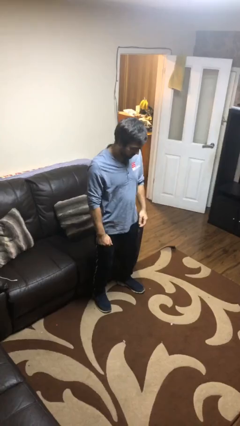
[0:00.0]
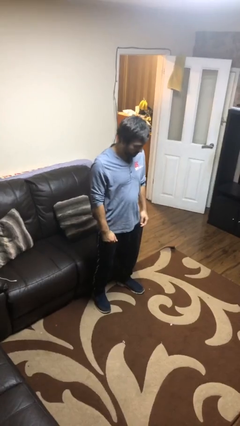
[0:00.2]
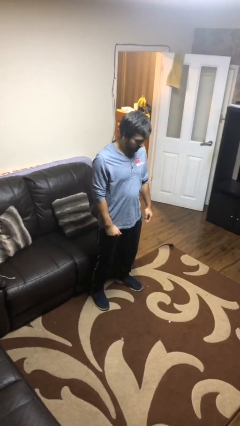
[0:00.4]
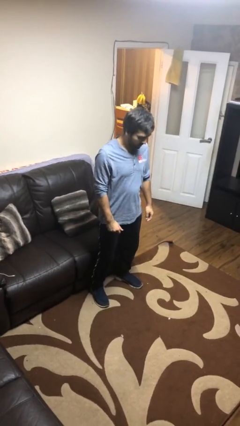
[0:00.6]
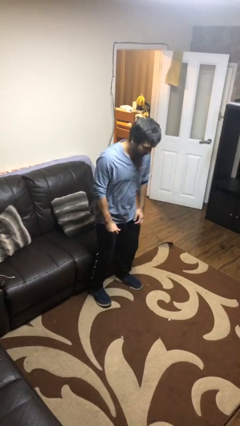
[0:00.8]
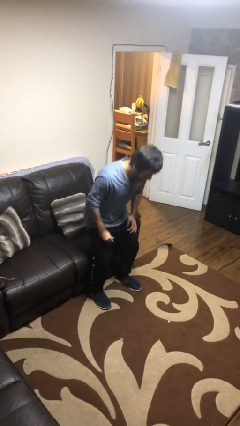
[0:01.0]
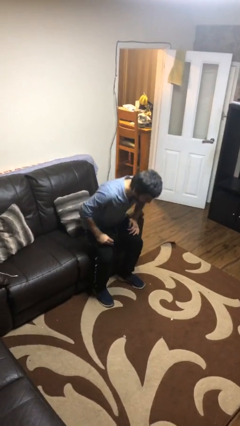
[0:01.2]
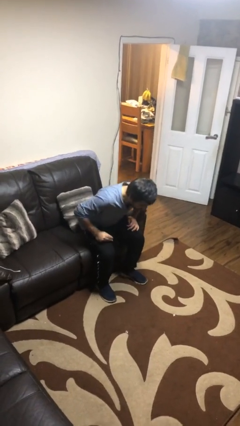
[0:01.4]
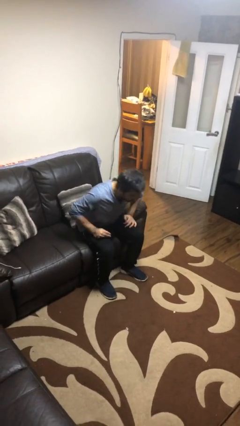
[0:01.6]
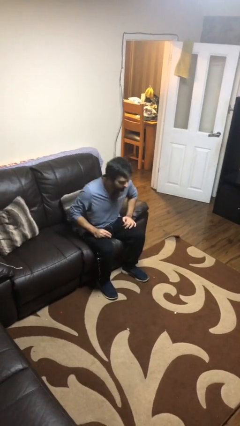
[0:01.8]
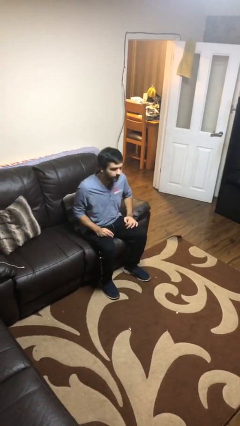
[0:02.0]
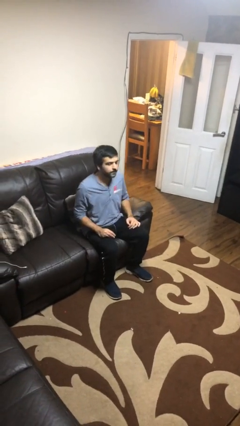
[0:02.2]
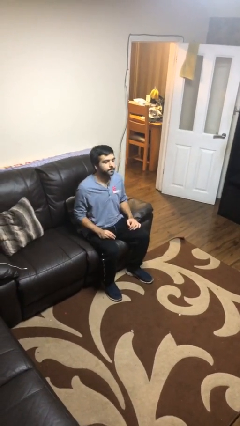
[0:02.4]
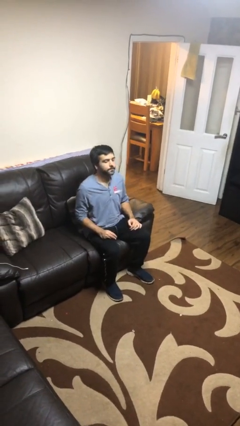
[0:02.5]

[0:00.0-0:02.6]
person sits down

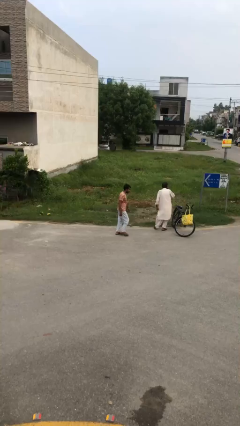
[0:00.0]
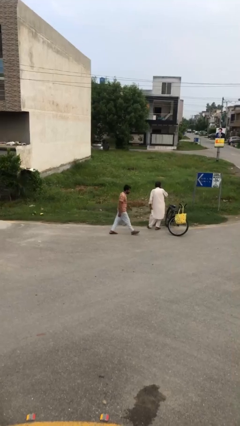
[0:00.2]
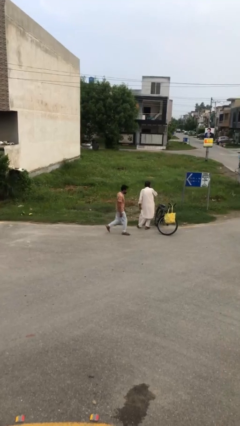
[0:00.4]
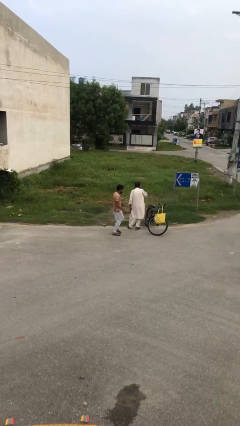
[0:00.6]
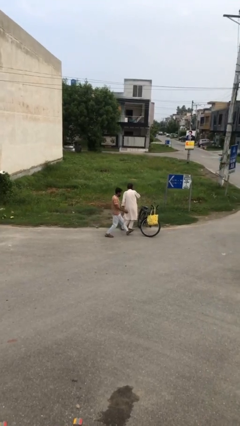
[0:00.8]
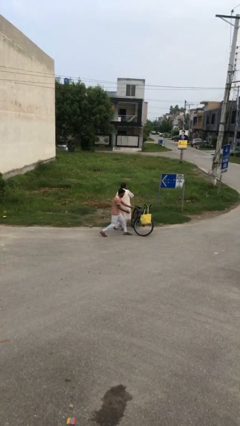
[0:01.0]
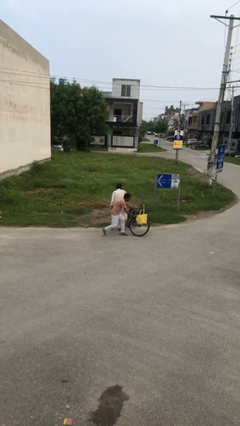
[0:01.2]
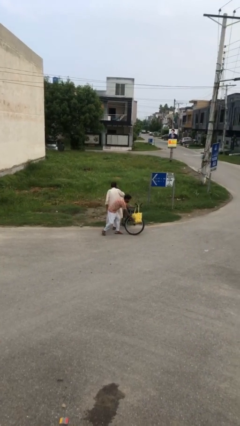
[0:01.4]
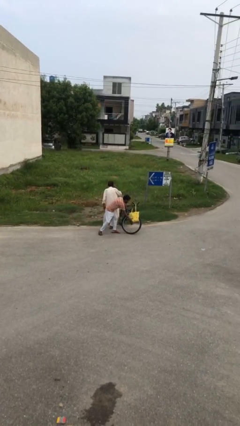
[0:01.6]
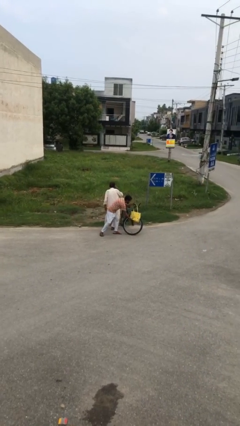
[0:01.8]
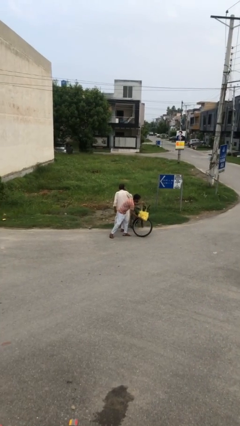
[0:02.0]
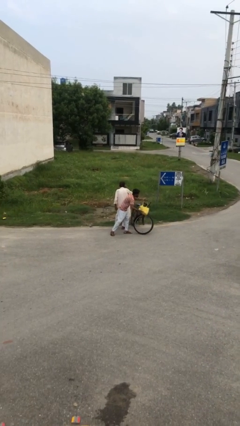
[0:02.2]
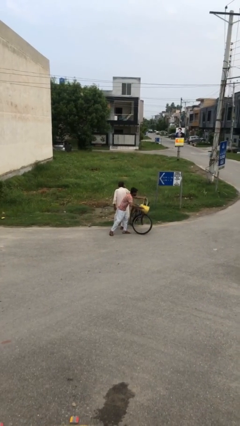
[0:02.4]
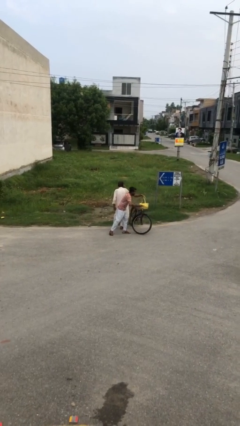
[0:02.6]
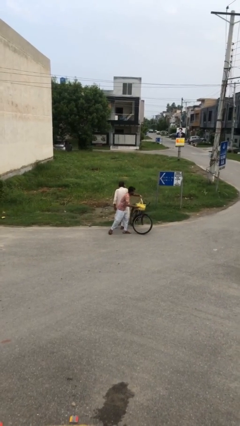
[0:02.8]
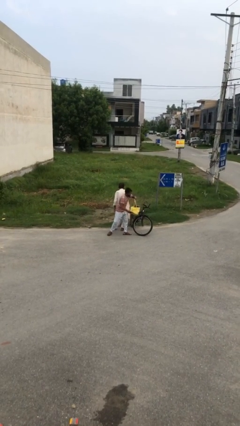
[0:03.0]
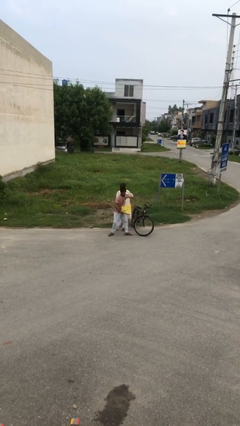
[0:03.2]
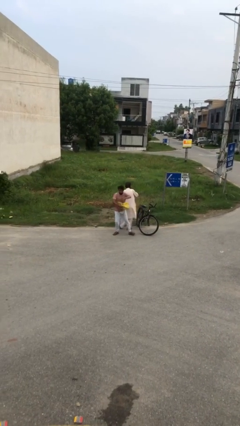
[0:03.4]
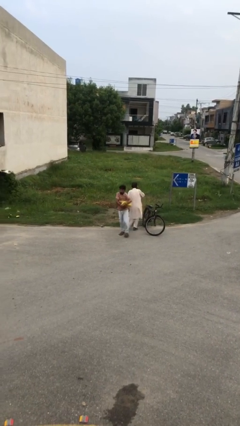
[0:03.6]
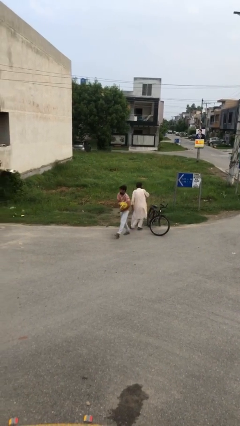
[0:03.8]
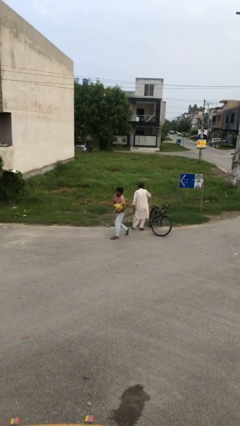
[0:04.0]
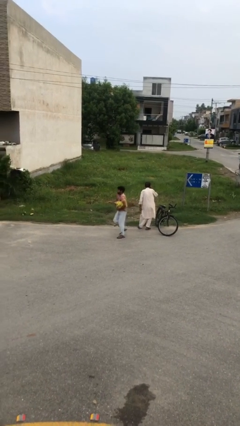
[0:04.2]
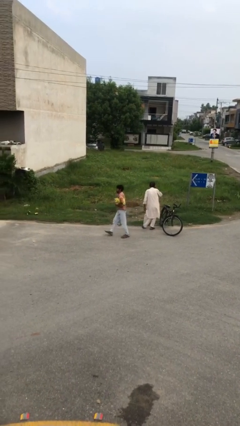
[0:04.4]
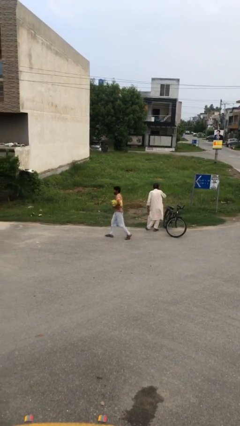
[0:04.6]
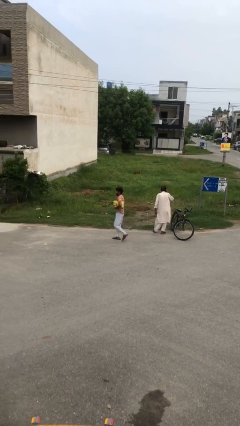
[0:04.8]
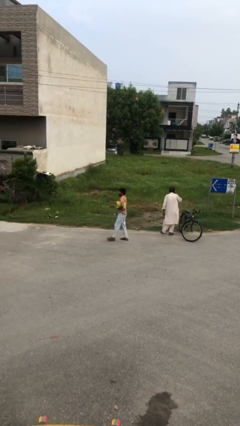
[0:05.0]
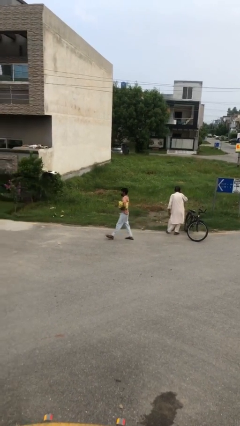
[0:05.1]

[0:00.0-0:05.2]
person steals object from person

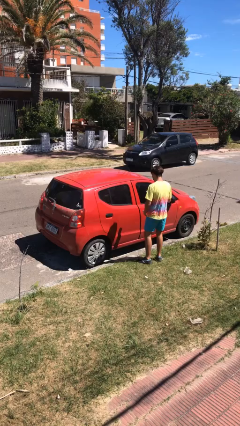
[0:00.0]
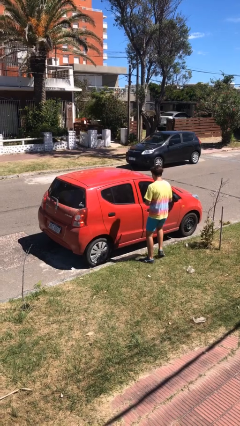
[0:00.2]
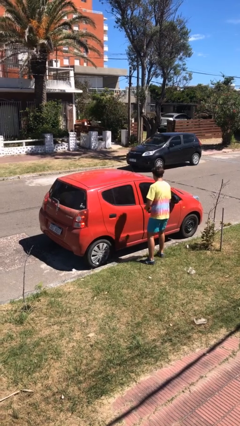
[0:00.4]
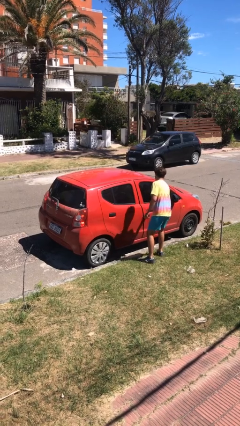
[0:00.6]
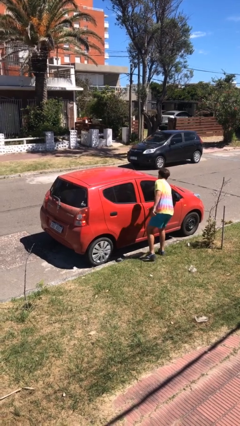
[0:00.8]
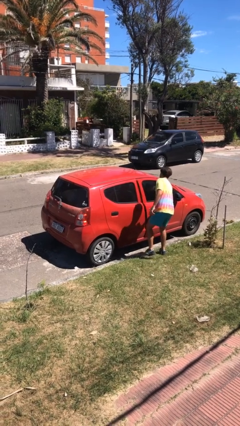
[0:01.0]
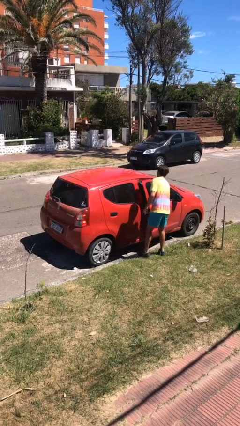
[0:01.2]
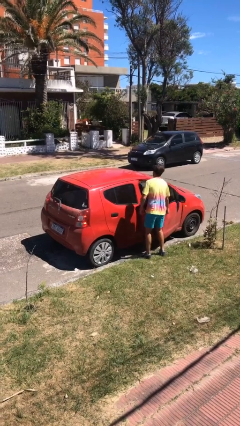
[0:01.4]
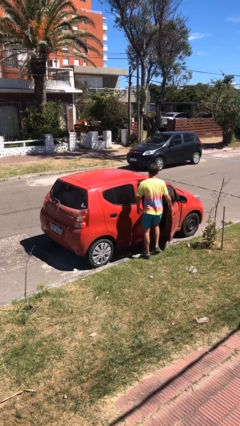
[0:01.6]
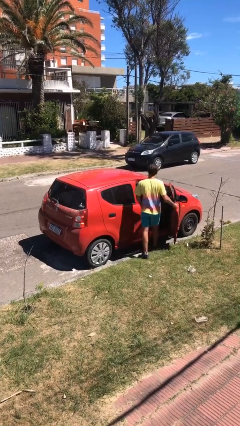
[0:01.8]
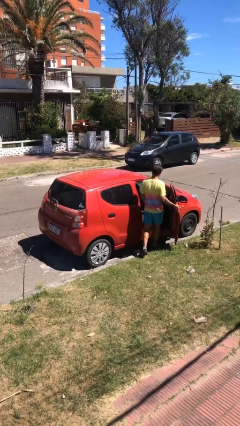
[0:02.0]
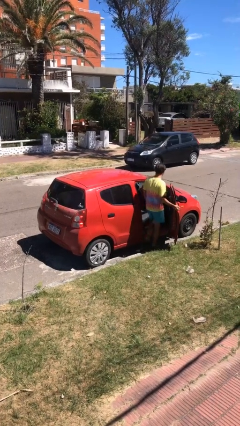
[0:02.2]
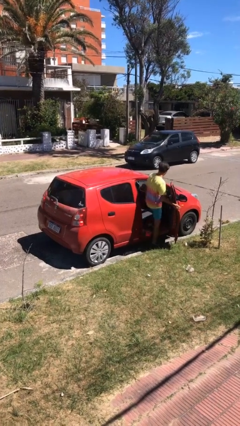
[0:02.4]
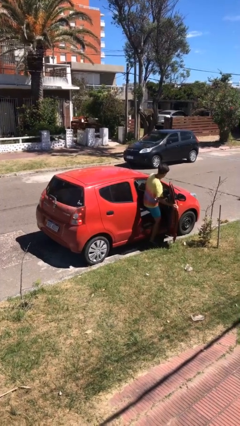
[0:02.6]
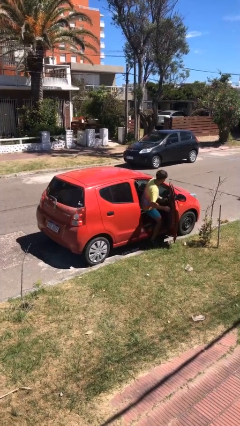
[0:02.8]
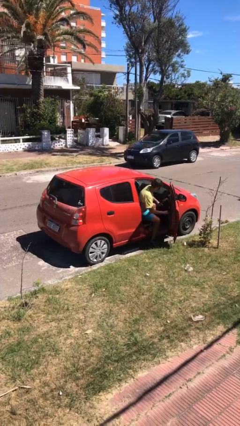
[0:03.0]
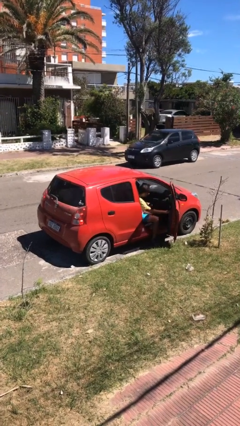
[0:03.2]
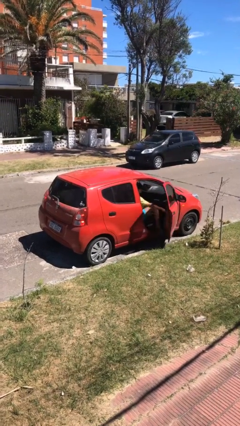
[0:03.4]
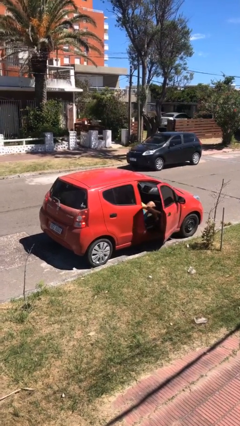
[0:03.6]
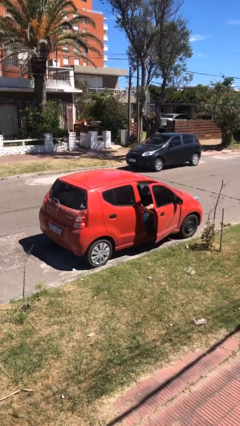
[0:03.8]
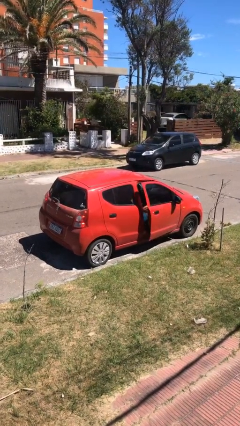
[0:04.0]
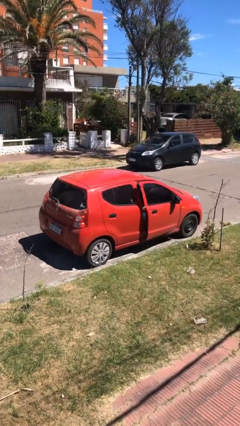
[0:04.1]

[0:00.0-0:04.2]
car picks up person

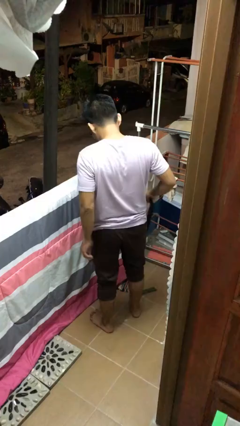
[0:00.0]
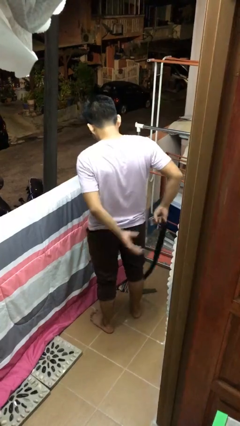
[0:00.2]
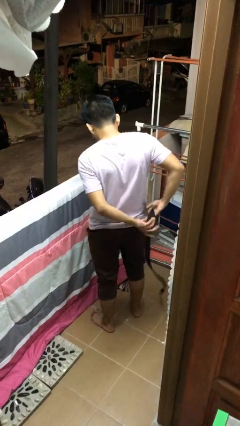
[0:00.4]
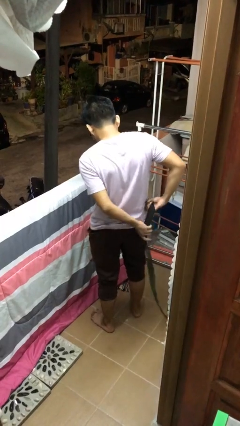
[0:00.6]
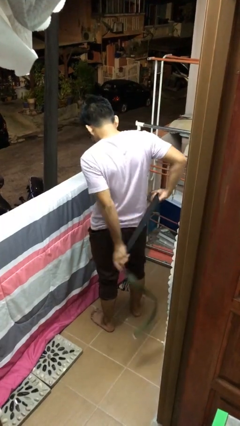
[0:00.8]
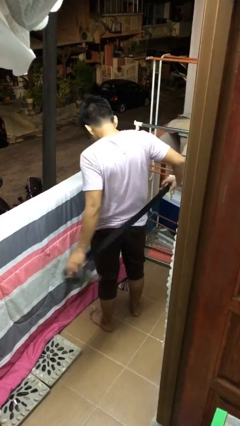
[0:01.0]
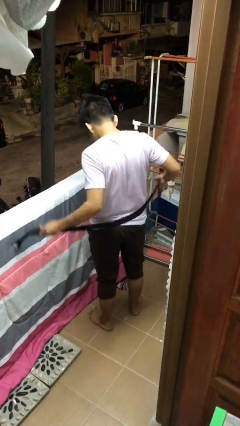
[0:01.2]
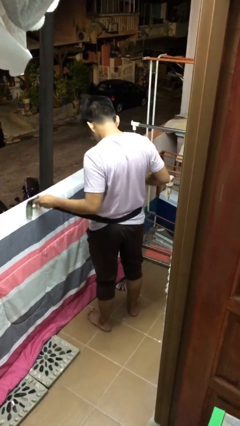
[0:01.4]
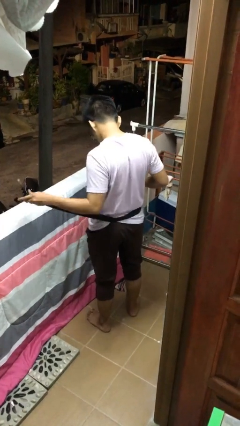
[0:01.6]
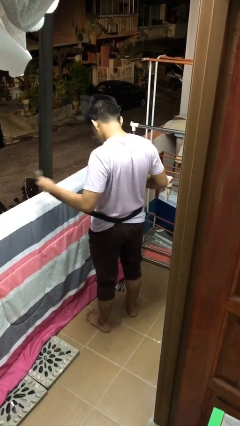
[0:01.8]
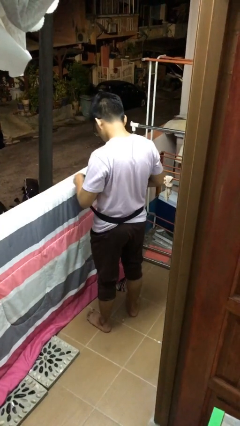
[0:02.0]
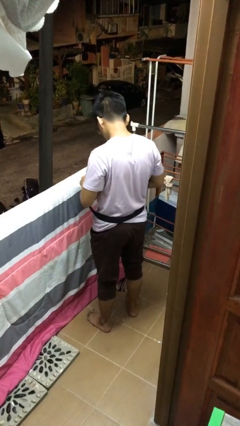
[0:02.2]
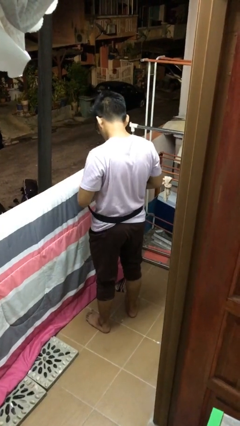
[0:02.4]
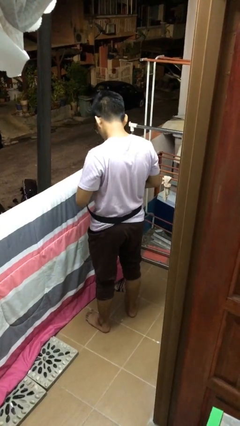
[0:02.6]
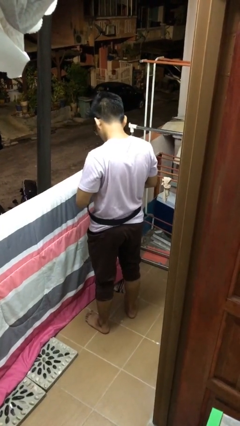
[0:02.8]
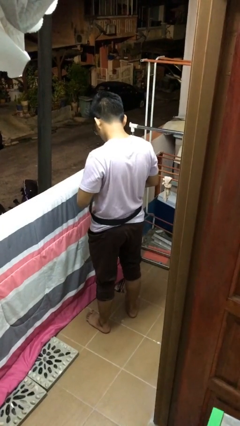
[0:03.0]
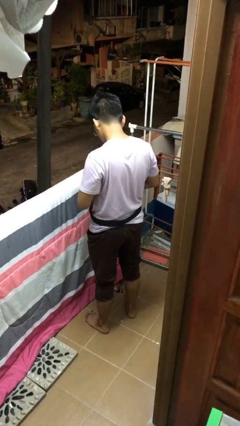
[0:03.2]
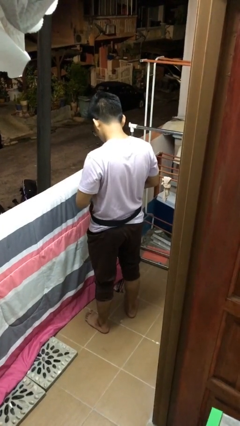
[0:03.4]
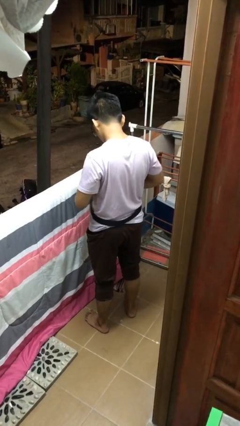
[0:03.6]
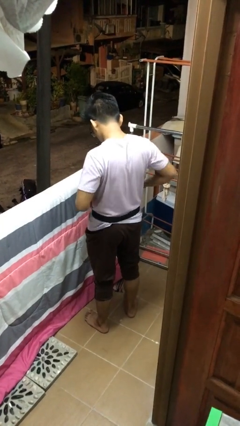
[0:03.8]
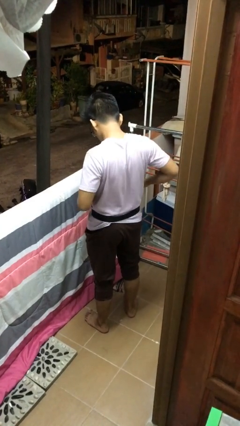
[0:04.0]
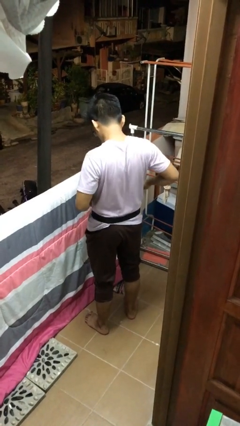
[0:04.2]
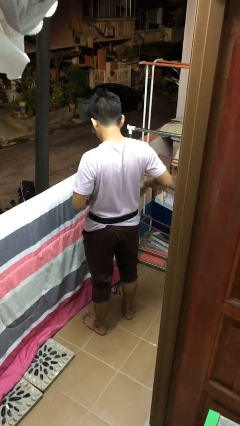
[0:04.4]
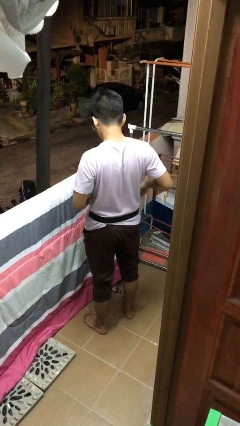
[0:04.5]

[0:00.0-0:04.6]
person puts on belt

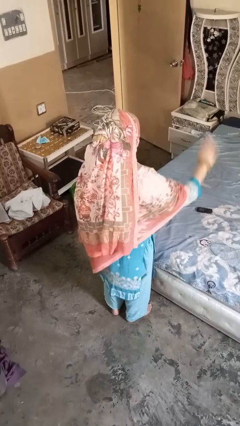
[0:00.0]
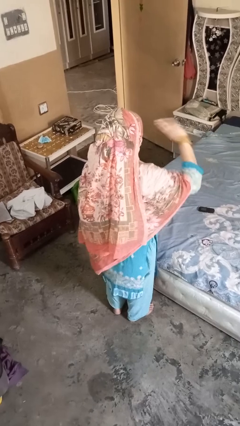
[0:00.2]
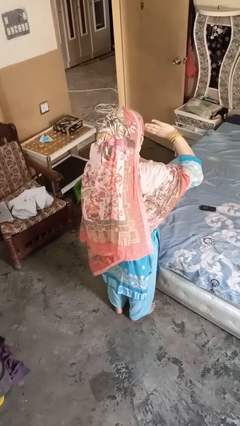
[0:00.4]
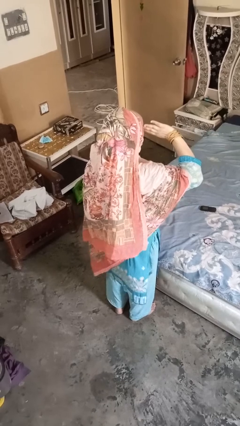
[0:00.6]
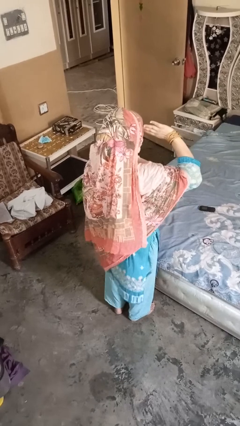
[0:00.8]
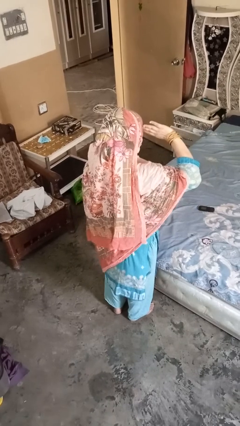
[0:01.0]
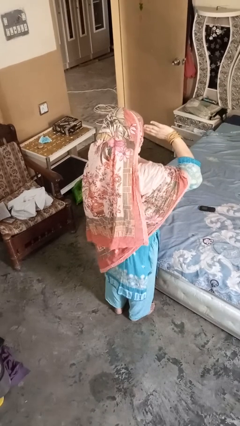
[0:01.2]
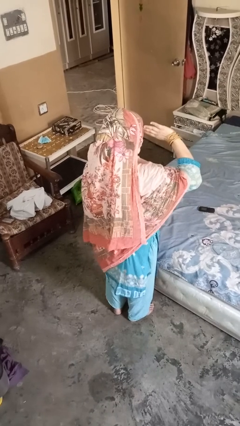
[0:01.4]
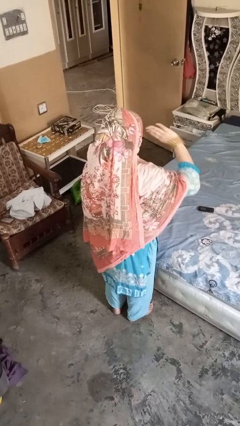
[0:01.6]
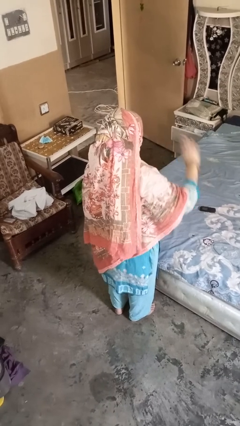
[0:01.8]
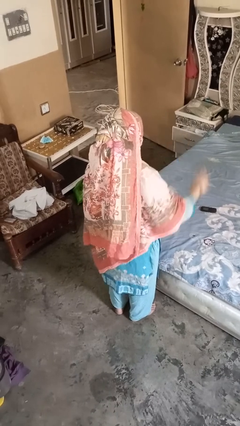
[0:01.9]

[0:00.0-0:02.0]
person salutes
